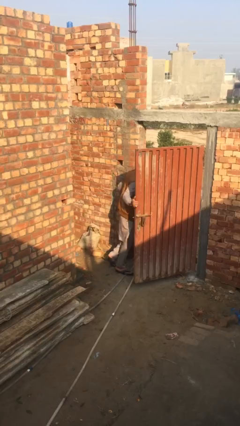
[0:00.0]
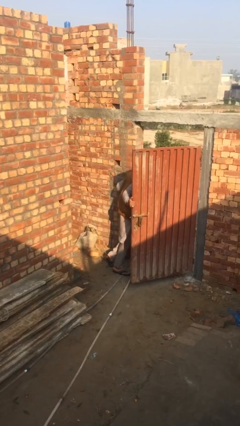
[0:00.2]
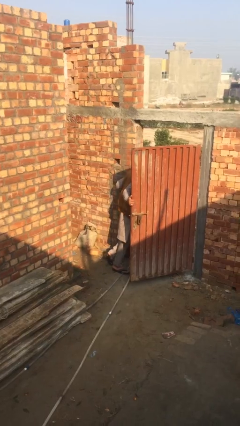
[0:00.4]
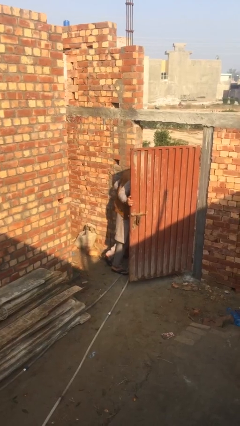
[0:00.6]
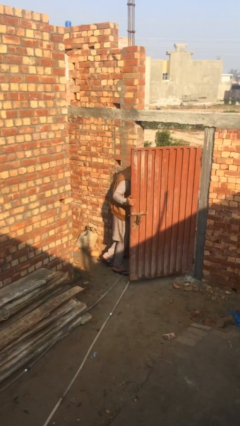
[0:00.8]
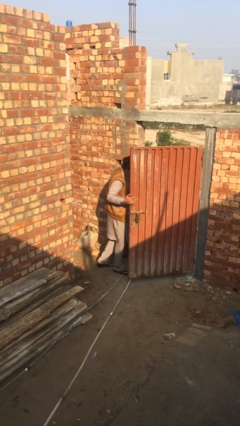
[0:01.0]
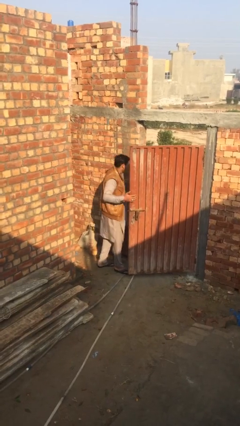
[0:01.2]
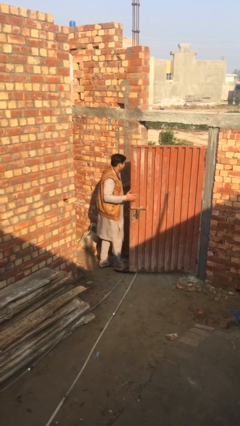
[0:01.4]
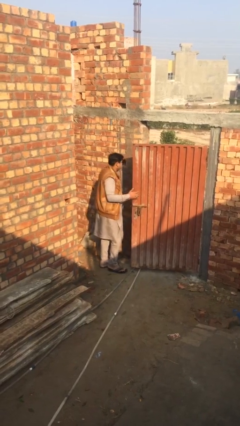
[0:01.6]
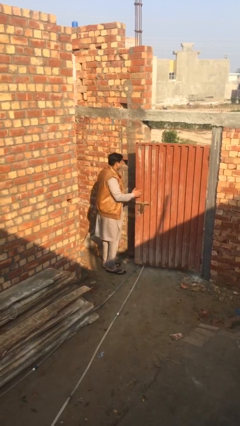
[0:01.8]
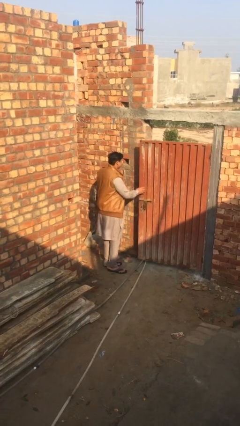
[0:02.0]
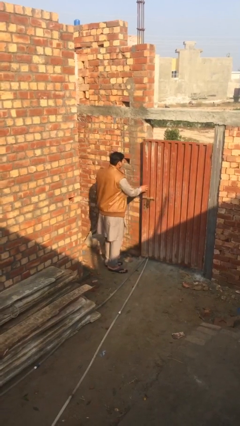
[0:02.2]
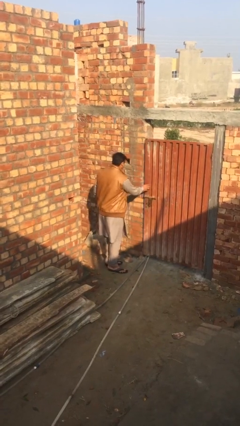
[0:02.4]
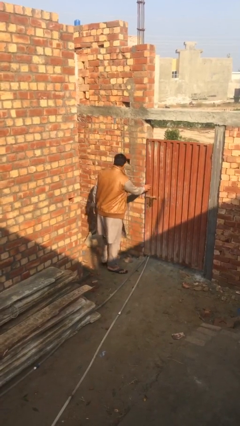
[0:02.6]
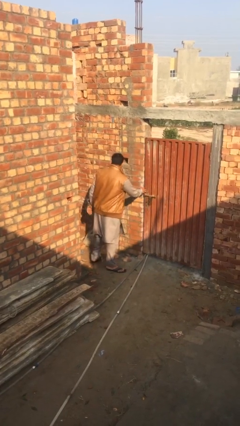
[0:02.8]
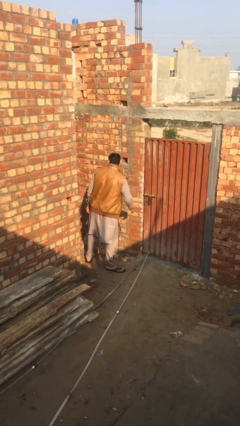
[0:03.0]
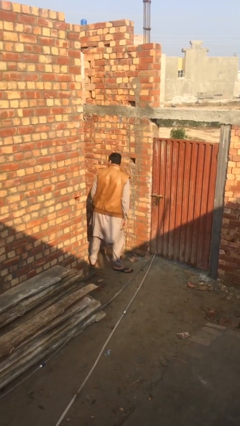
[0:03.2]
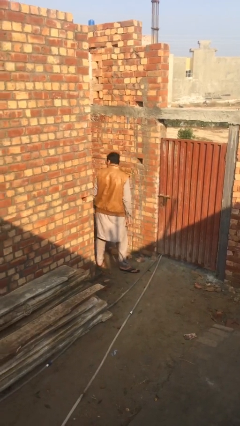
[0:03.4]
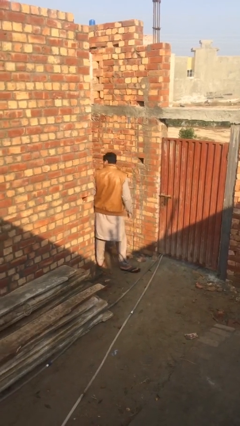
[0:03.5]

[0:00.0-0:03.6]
person closes facility door

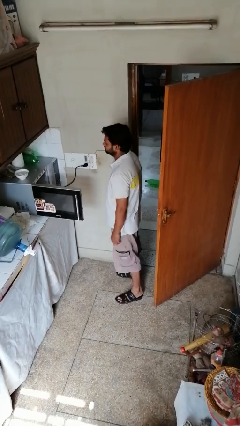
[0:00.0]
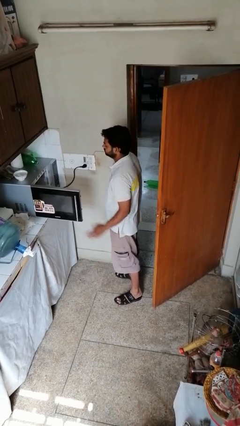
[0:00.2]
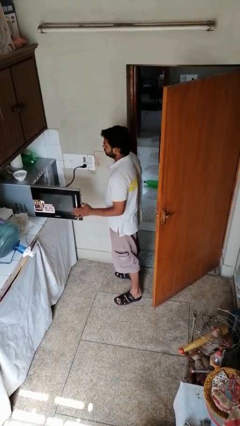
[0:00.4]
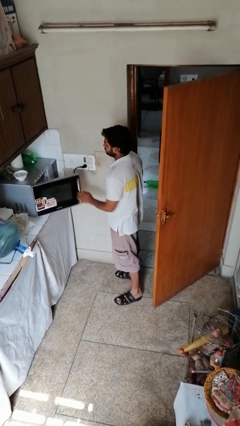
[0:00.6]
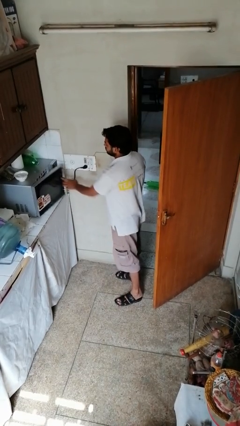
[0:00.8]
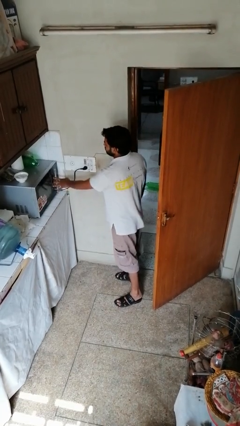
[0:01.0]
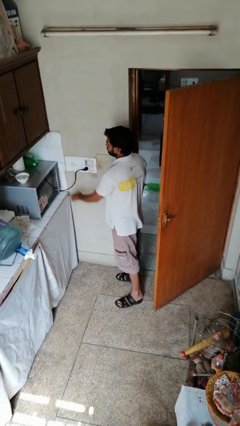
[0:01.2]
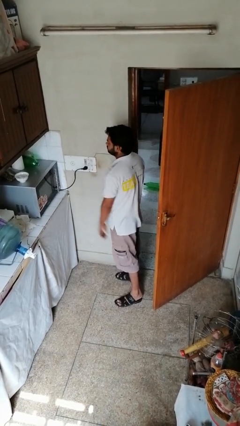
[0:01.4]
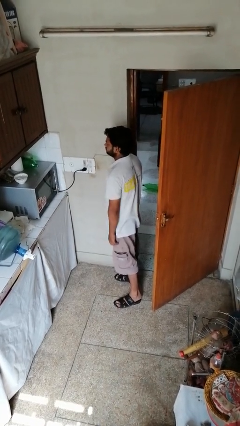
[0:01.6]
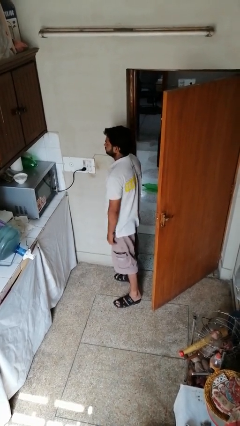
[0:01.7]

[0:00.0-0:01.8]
person closes microwave

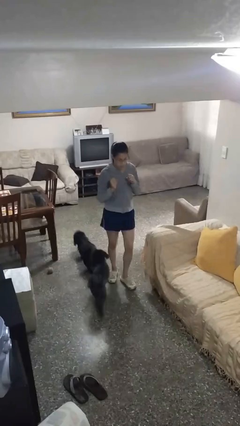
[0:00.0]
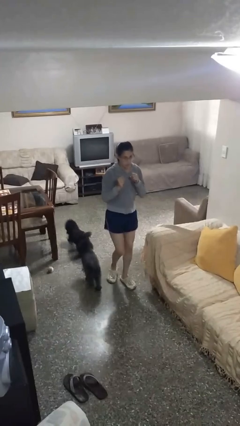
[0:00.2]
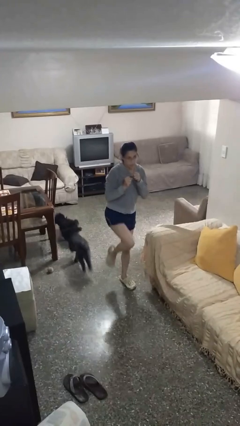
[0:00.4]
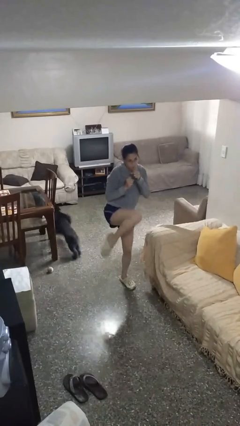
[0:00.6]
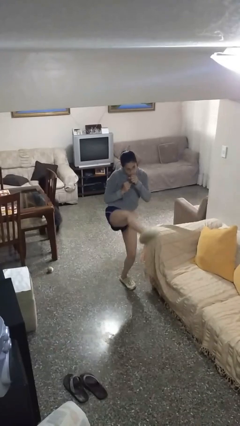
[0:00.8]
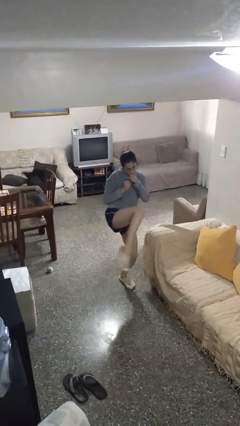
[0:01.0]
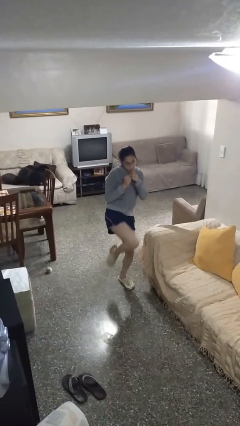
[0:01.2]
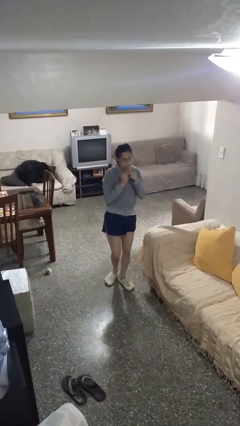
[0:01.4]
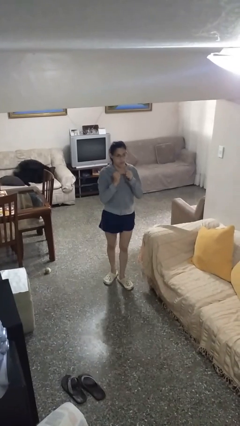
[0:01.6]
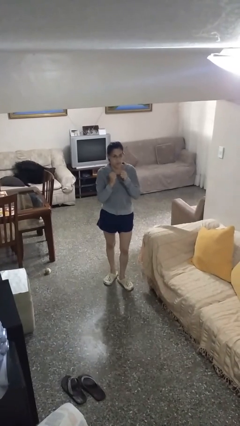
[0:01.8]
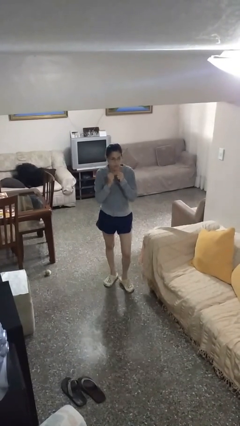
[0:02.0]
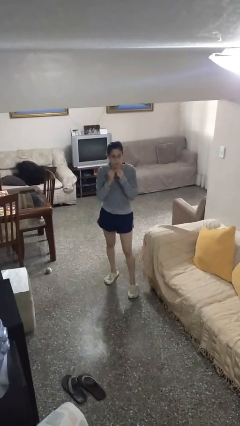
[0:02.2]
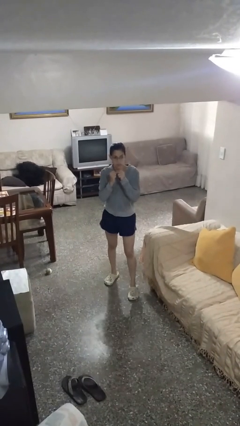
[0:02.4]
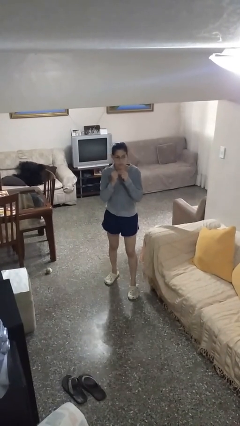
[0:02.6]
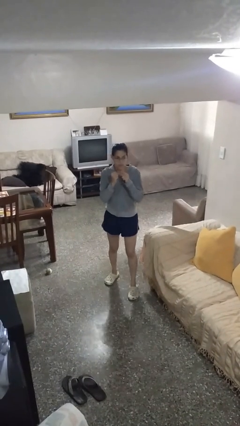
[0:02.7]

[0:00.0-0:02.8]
person karate kicks

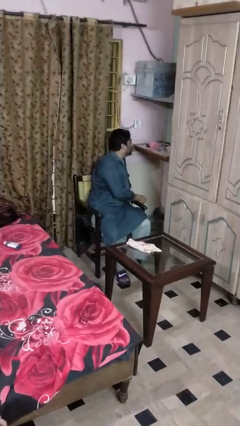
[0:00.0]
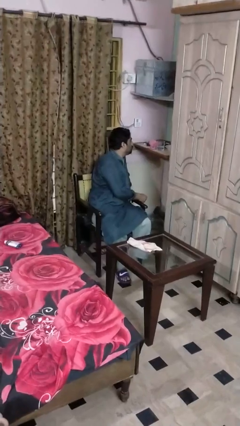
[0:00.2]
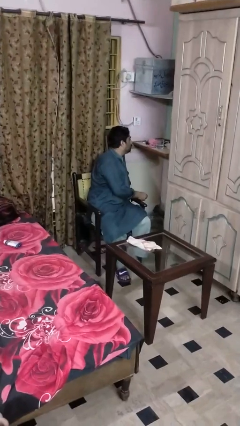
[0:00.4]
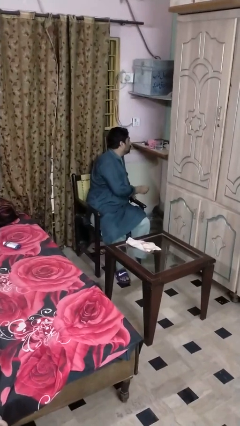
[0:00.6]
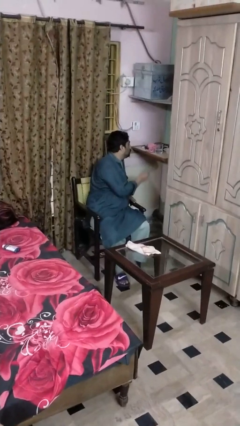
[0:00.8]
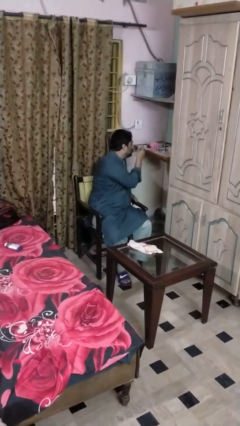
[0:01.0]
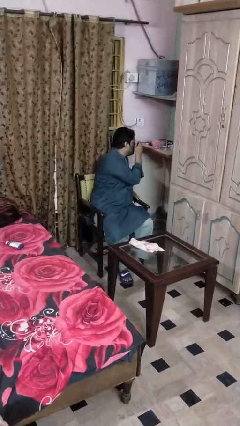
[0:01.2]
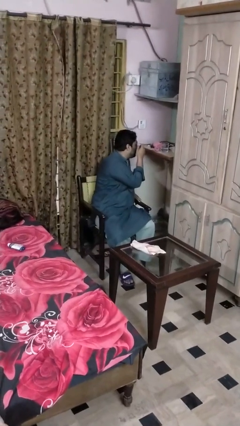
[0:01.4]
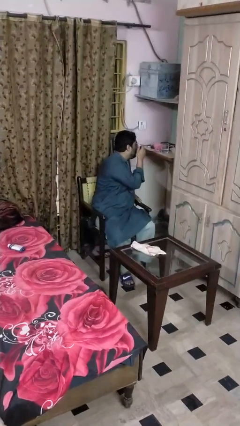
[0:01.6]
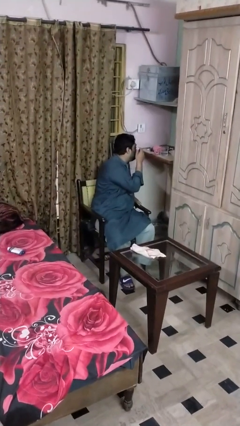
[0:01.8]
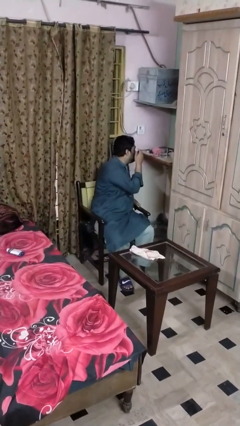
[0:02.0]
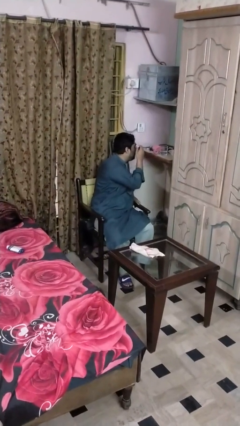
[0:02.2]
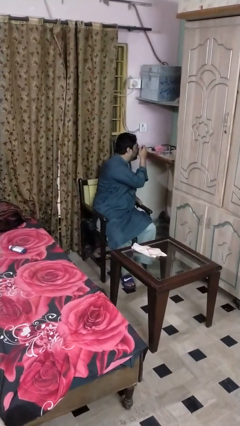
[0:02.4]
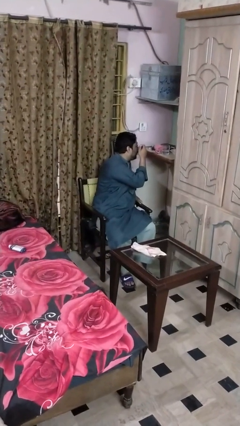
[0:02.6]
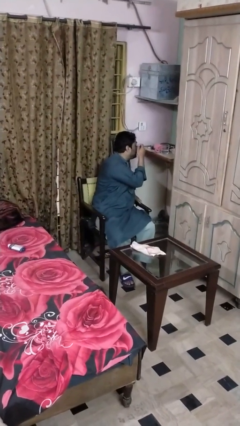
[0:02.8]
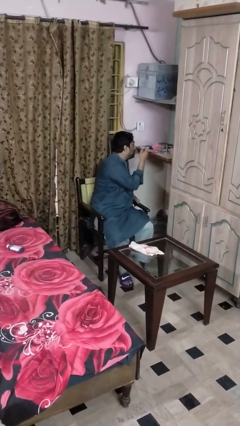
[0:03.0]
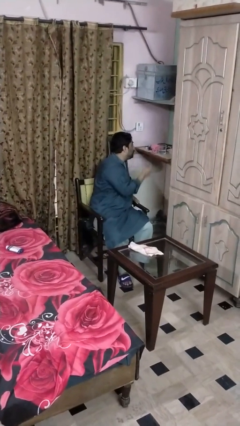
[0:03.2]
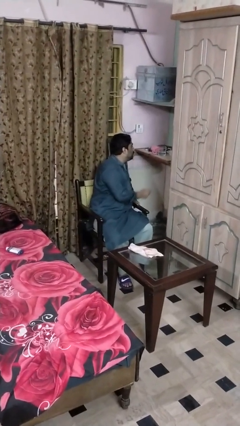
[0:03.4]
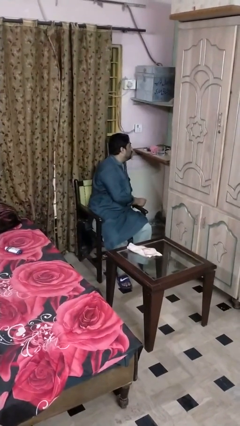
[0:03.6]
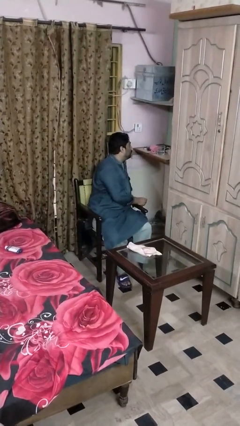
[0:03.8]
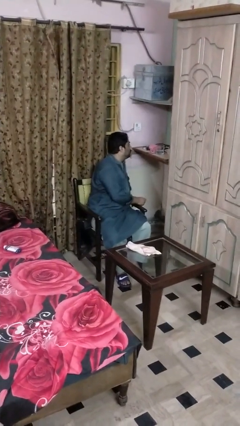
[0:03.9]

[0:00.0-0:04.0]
person applies eye makeup

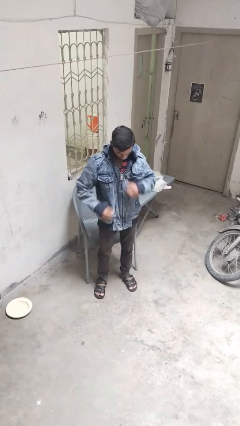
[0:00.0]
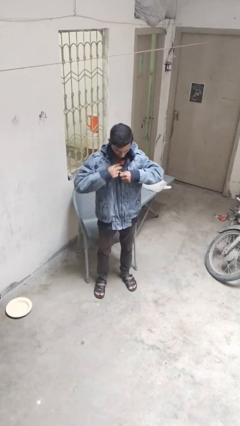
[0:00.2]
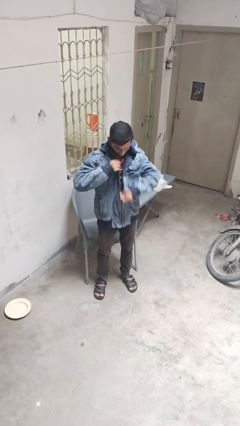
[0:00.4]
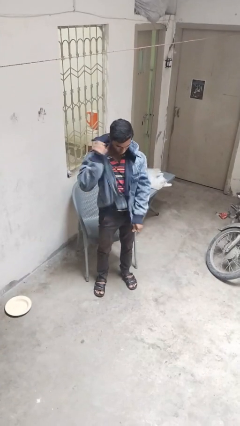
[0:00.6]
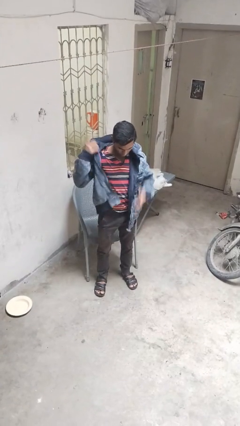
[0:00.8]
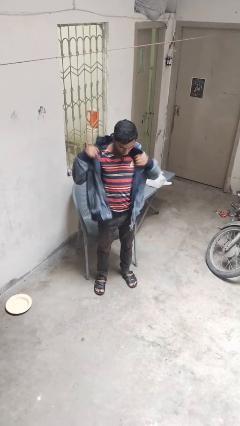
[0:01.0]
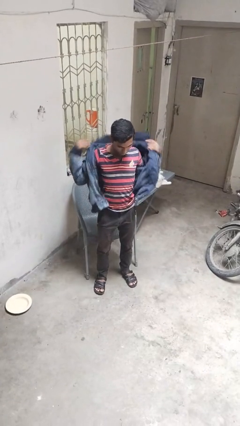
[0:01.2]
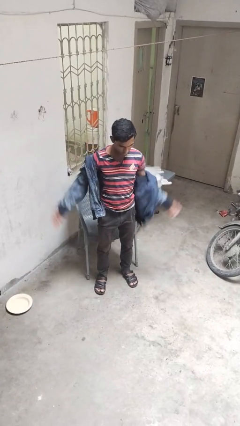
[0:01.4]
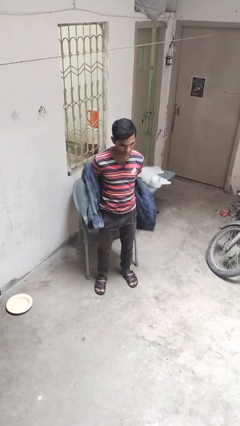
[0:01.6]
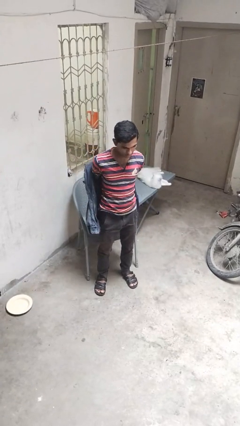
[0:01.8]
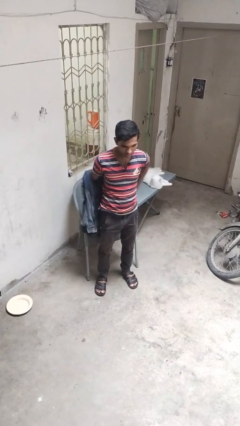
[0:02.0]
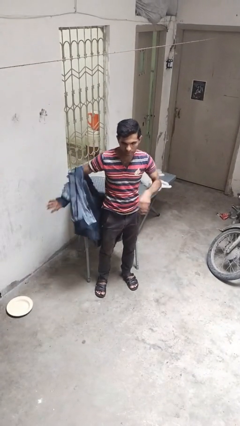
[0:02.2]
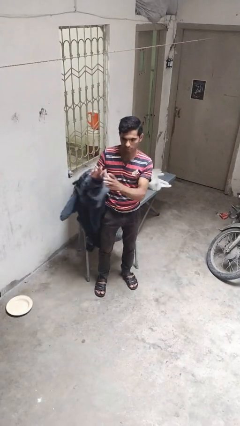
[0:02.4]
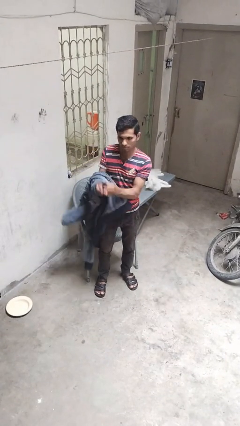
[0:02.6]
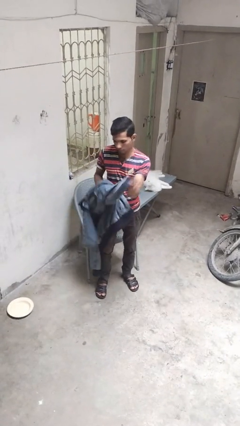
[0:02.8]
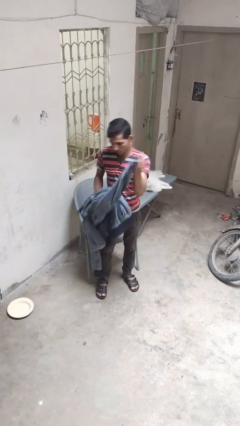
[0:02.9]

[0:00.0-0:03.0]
person unzips jacket

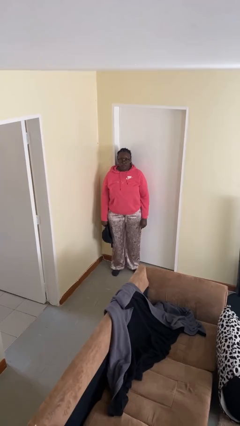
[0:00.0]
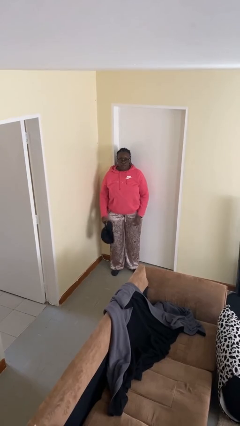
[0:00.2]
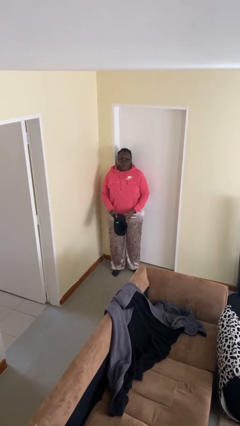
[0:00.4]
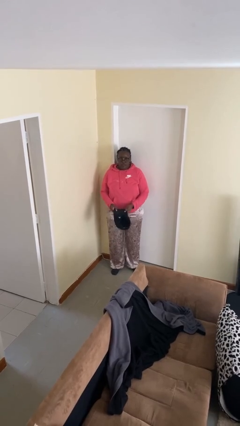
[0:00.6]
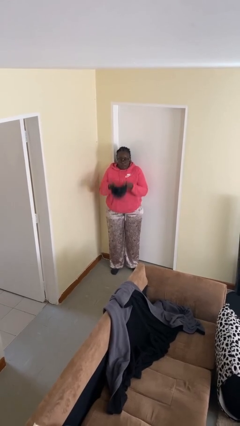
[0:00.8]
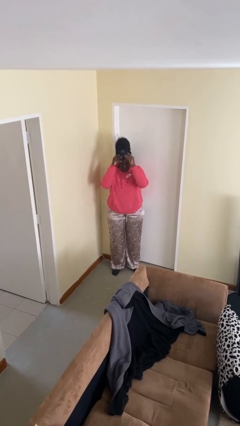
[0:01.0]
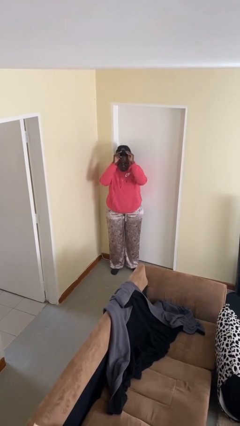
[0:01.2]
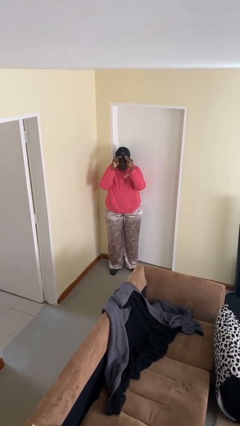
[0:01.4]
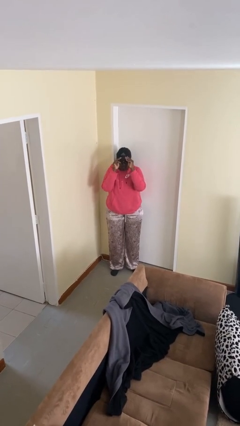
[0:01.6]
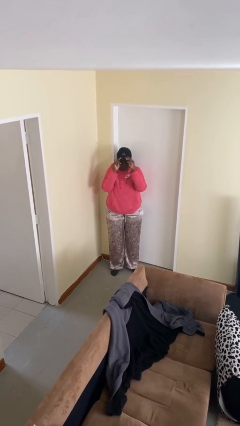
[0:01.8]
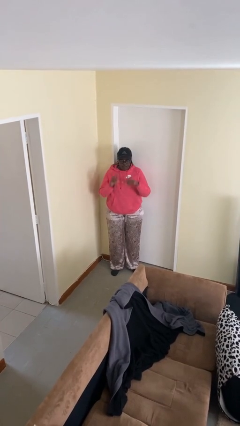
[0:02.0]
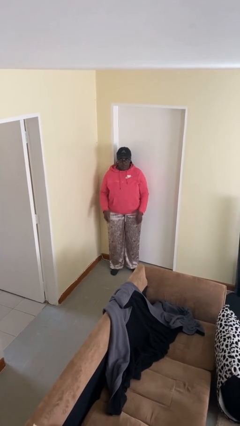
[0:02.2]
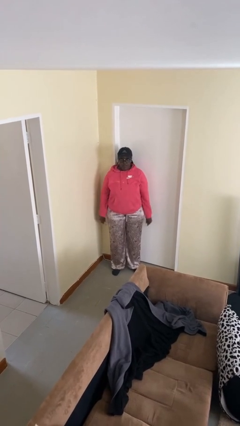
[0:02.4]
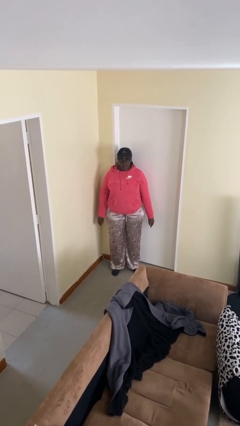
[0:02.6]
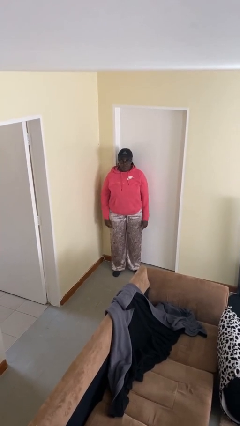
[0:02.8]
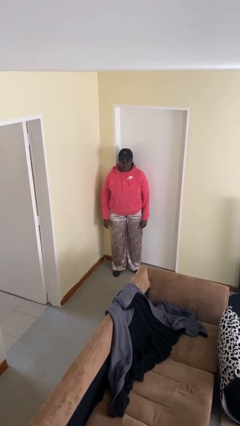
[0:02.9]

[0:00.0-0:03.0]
person puts on hat
